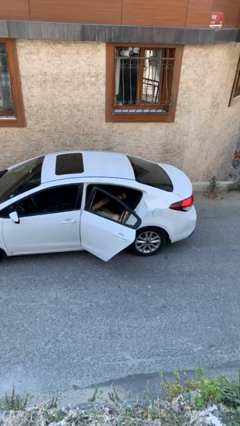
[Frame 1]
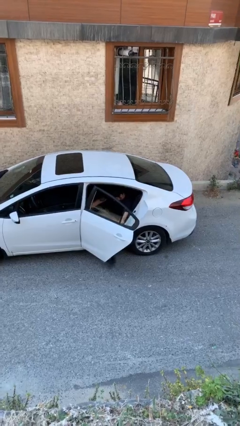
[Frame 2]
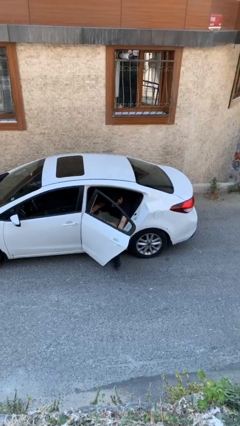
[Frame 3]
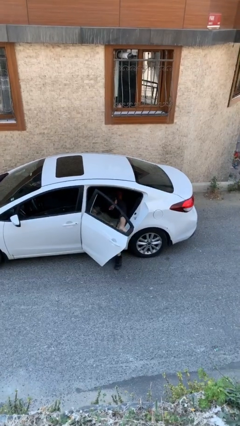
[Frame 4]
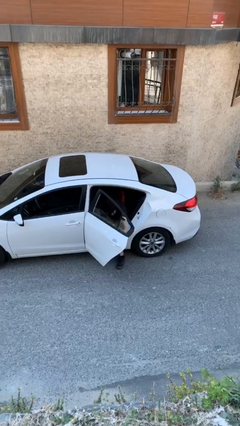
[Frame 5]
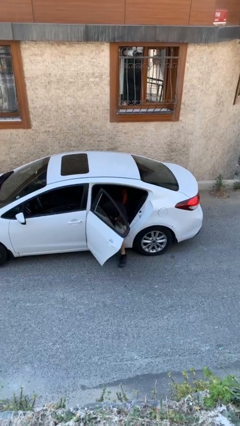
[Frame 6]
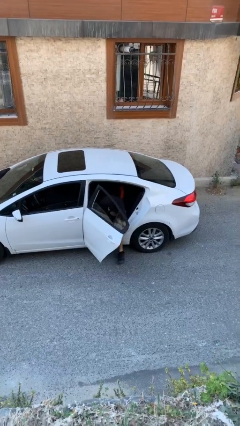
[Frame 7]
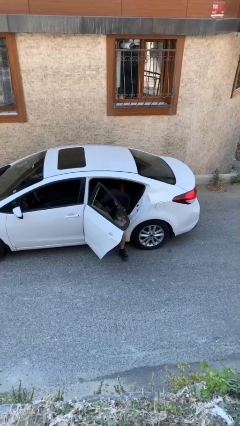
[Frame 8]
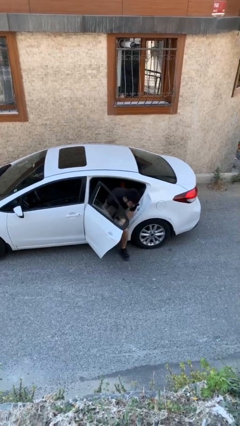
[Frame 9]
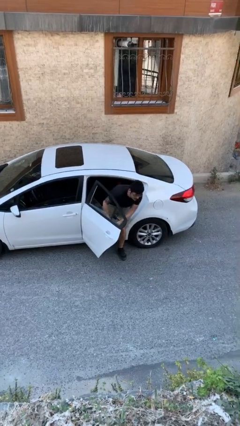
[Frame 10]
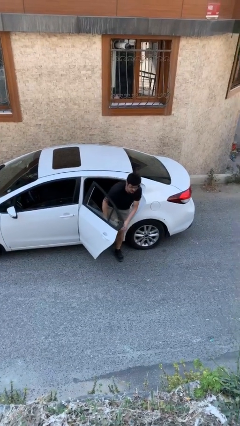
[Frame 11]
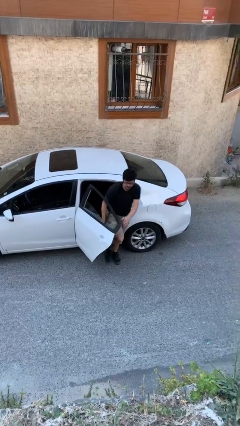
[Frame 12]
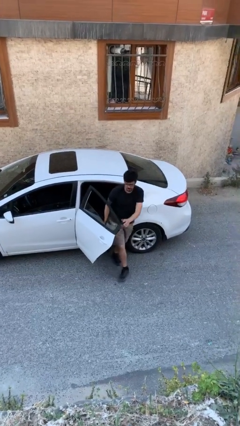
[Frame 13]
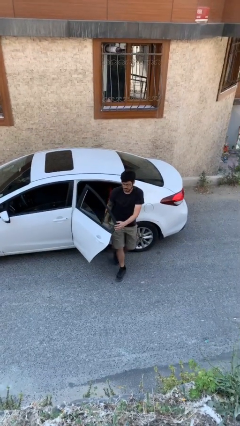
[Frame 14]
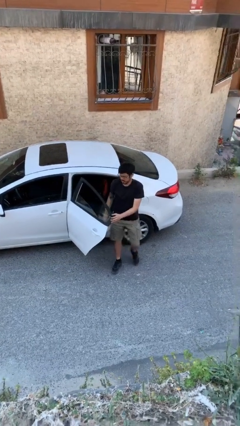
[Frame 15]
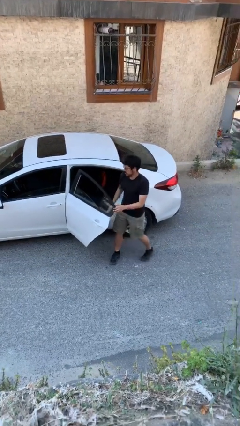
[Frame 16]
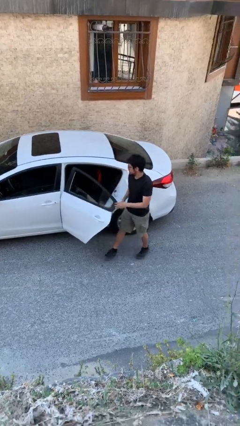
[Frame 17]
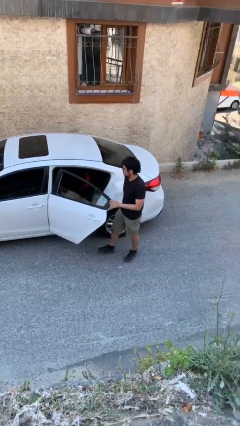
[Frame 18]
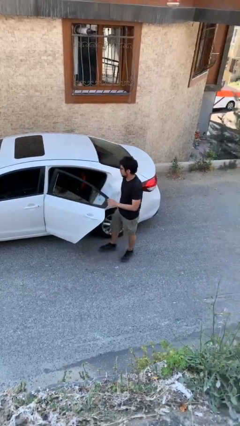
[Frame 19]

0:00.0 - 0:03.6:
person exits car

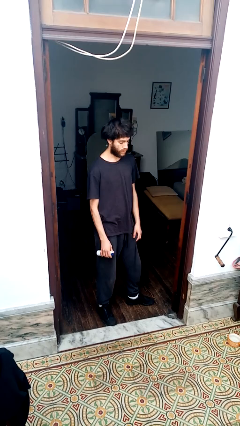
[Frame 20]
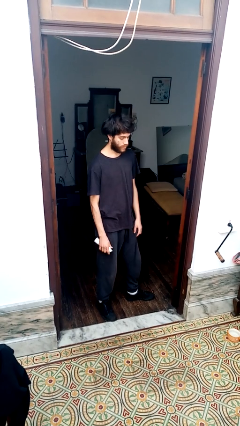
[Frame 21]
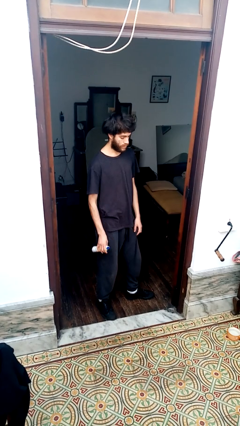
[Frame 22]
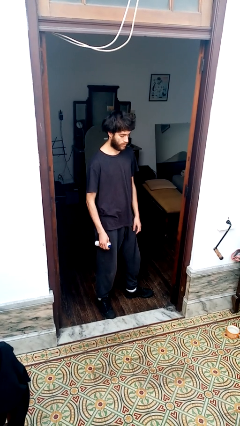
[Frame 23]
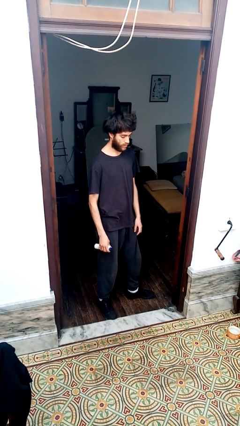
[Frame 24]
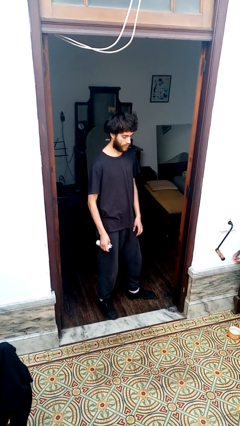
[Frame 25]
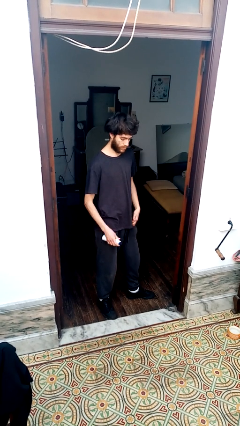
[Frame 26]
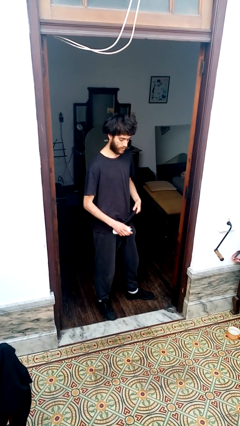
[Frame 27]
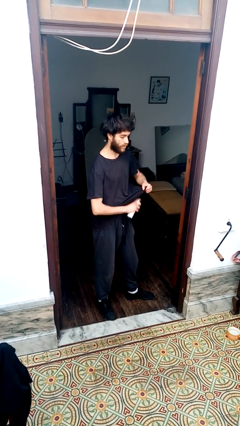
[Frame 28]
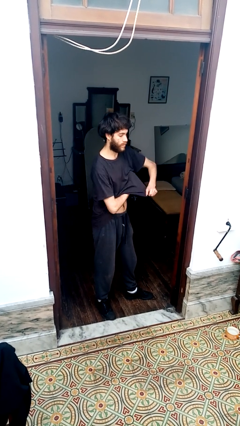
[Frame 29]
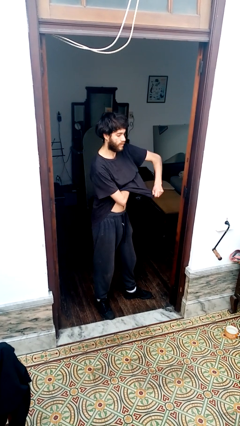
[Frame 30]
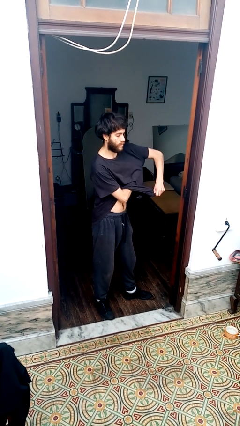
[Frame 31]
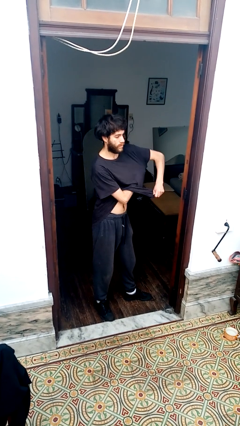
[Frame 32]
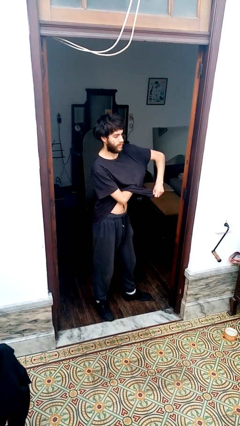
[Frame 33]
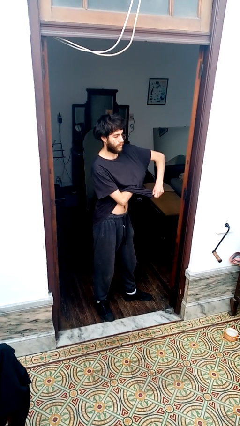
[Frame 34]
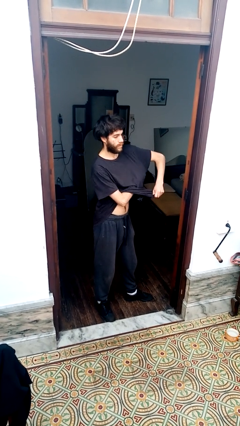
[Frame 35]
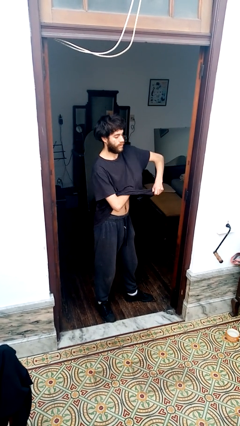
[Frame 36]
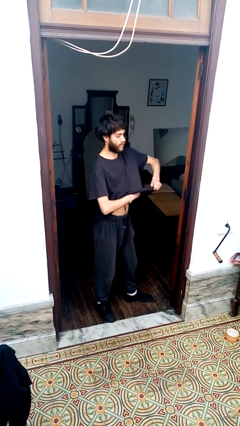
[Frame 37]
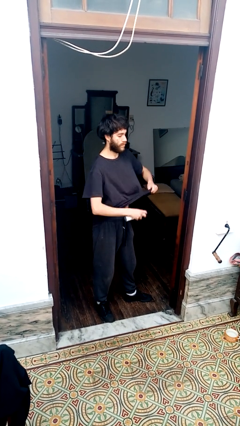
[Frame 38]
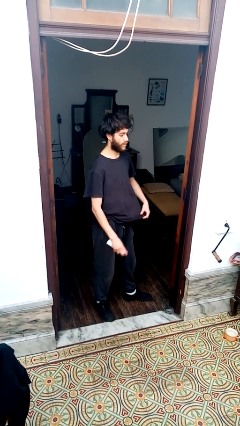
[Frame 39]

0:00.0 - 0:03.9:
person applies deodorant

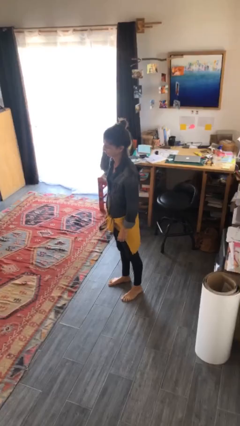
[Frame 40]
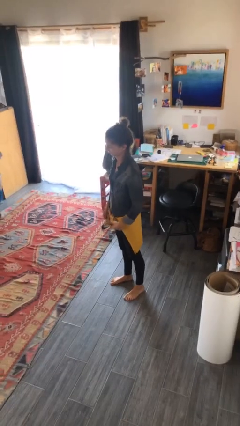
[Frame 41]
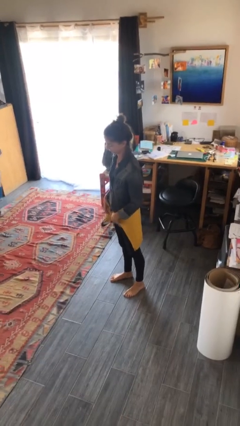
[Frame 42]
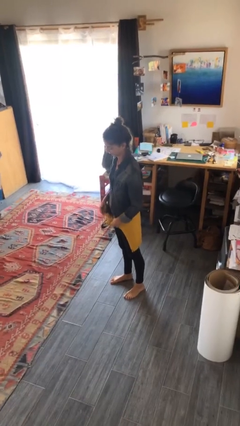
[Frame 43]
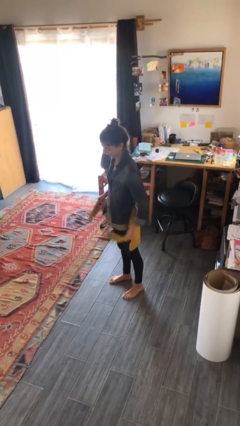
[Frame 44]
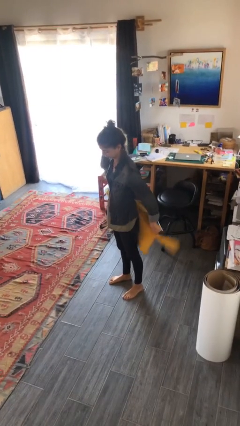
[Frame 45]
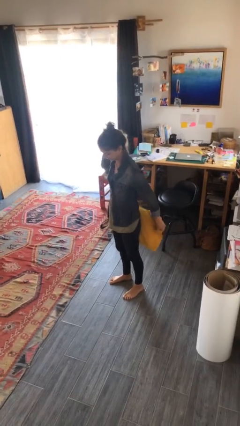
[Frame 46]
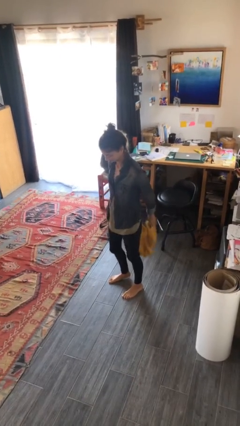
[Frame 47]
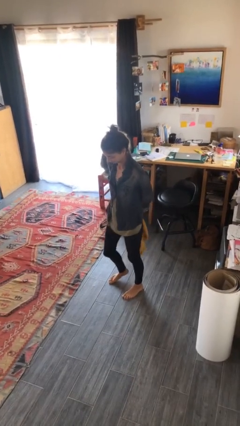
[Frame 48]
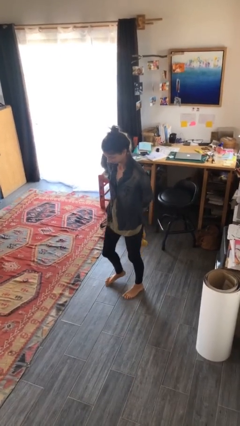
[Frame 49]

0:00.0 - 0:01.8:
person unties jacket around waist

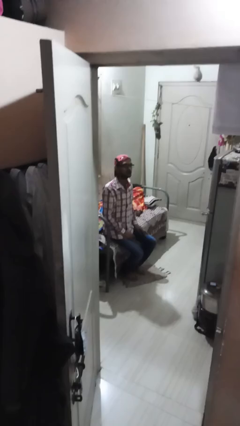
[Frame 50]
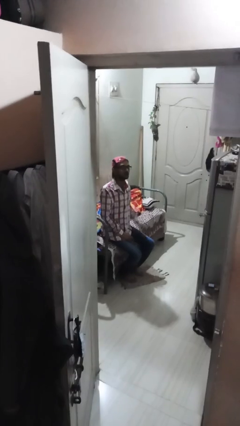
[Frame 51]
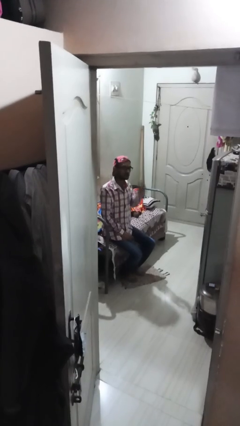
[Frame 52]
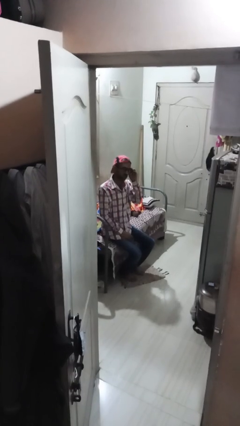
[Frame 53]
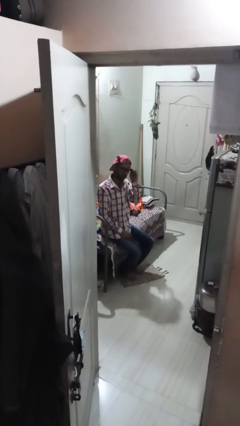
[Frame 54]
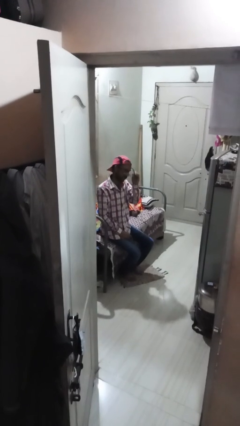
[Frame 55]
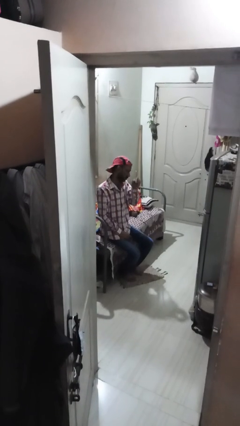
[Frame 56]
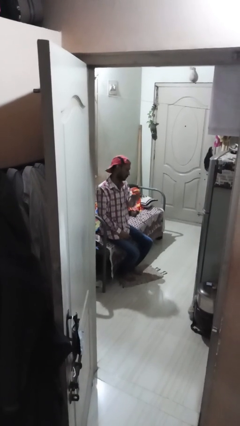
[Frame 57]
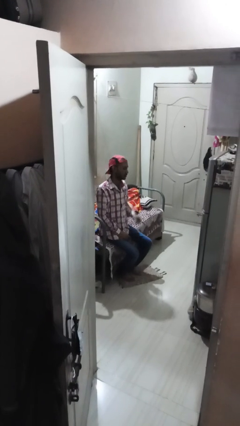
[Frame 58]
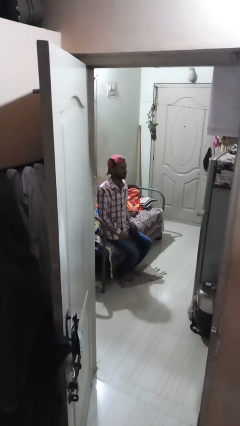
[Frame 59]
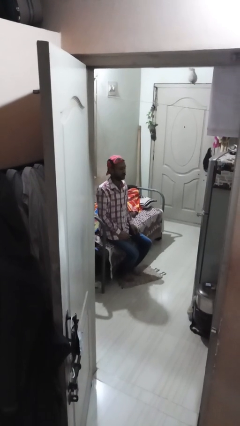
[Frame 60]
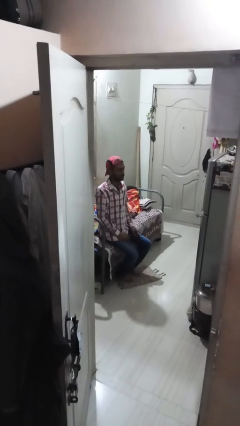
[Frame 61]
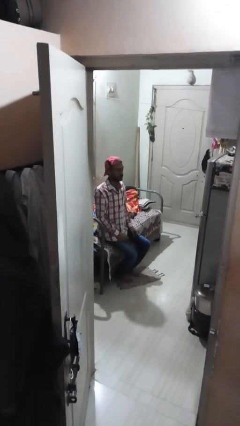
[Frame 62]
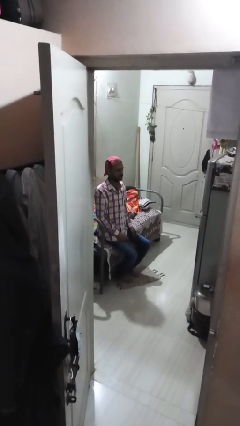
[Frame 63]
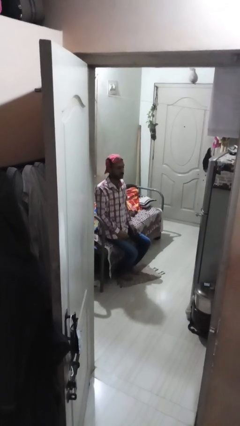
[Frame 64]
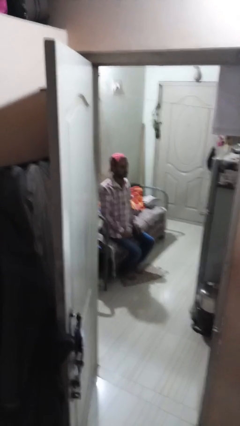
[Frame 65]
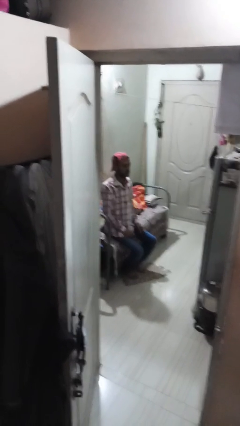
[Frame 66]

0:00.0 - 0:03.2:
person takes off glasses

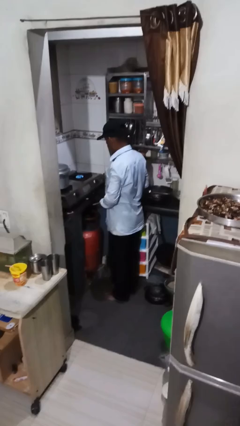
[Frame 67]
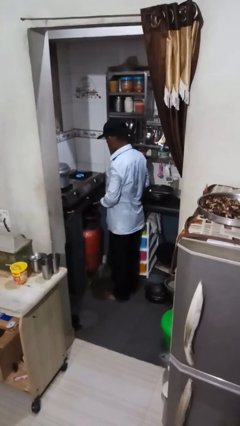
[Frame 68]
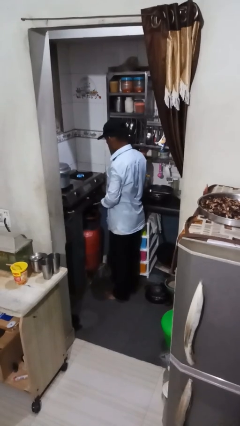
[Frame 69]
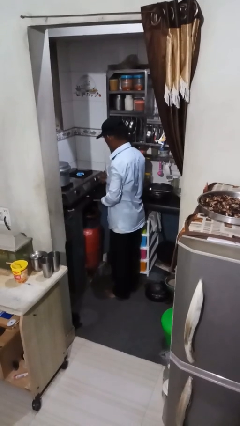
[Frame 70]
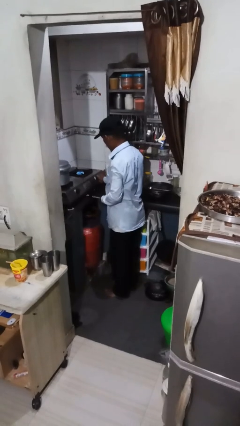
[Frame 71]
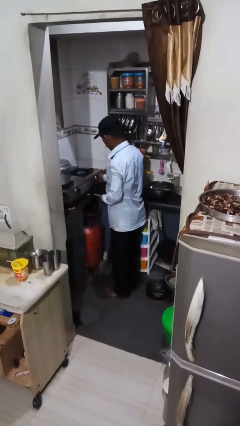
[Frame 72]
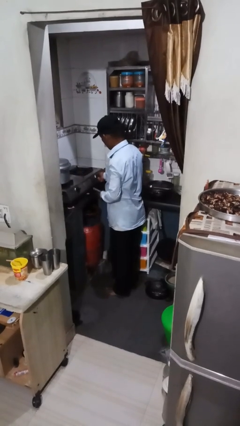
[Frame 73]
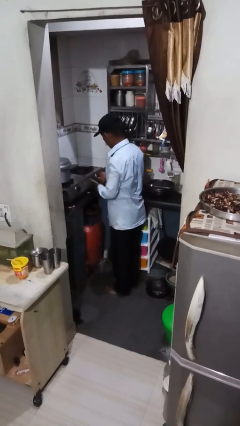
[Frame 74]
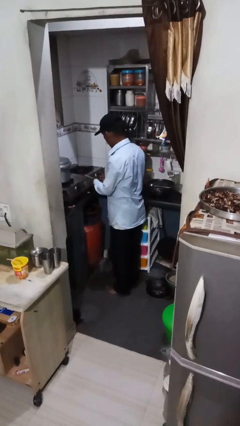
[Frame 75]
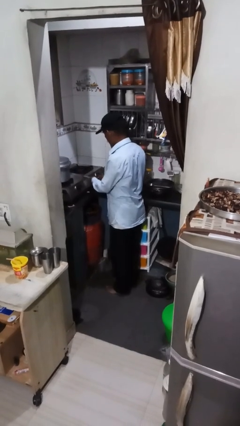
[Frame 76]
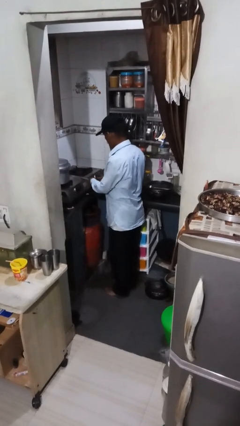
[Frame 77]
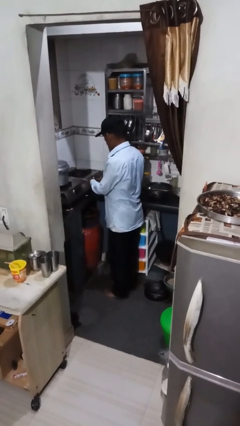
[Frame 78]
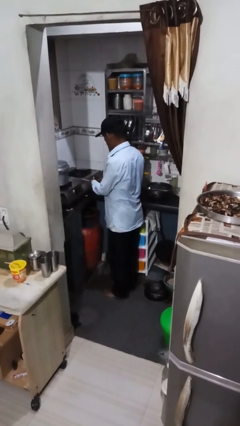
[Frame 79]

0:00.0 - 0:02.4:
person turns off stovetop

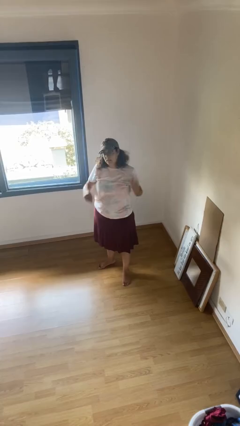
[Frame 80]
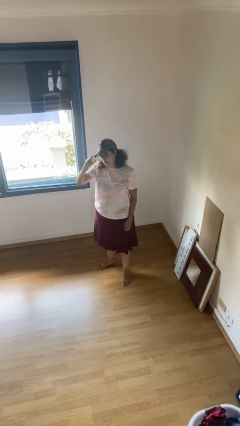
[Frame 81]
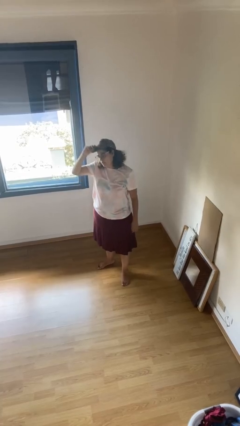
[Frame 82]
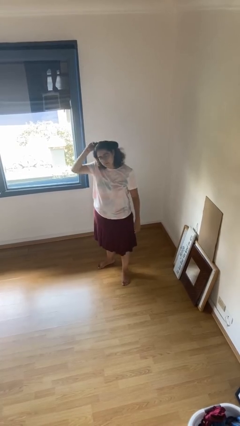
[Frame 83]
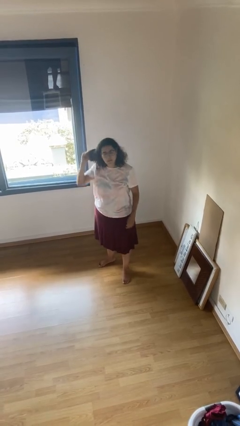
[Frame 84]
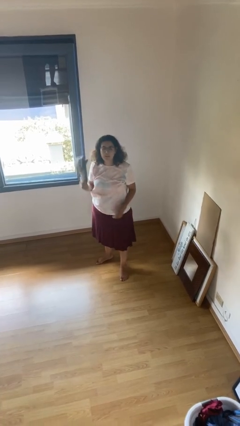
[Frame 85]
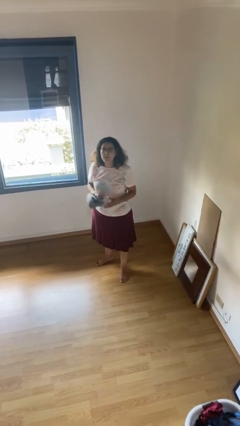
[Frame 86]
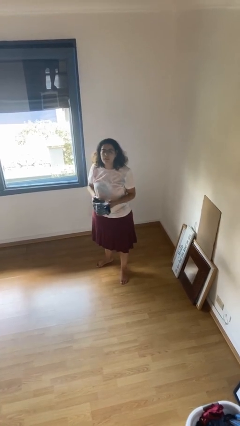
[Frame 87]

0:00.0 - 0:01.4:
person takes off hat

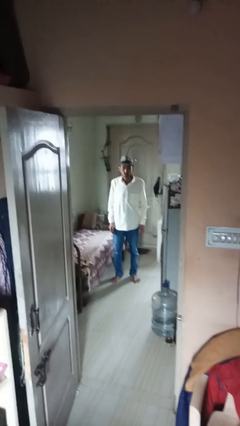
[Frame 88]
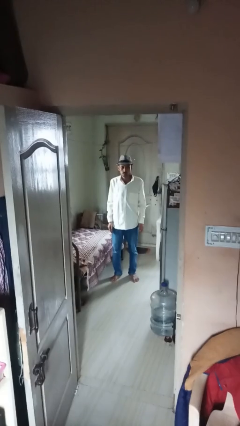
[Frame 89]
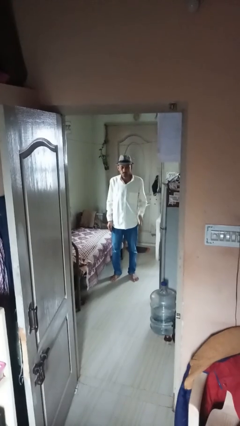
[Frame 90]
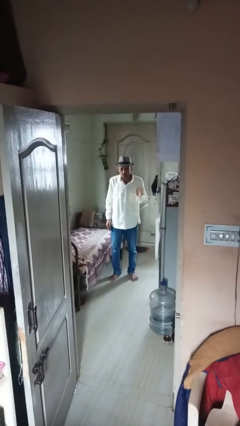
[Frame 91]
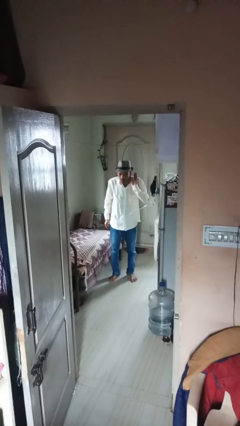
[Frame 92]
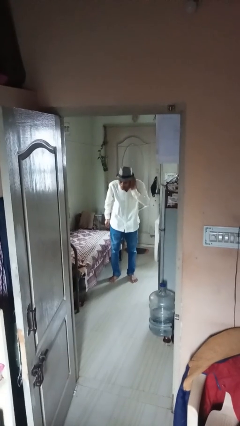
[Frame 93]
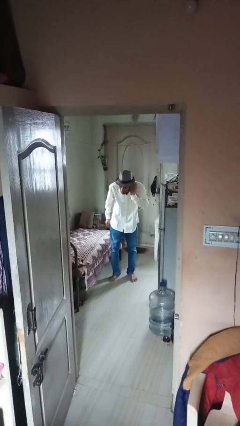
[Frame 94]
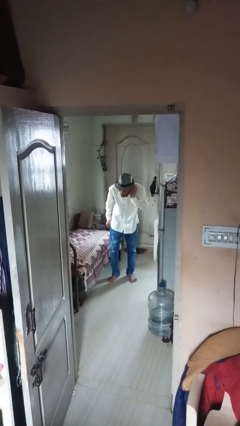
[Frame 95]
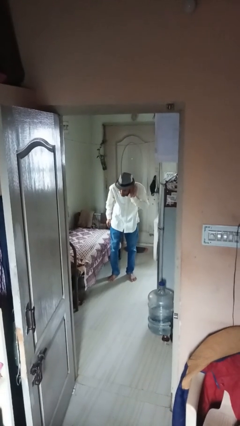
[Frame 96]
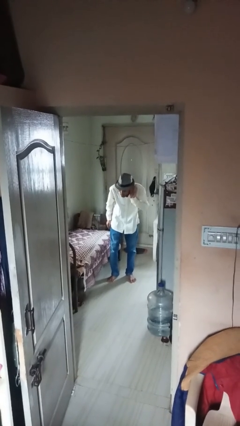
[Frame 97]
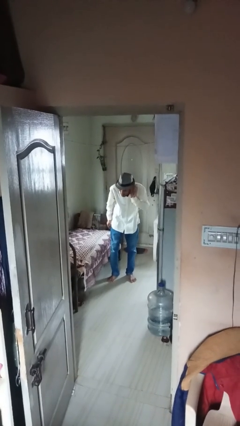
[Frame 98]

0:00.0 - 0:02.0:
person gestures listen closely
